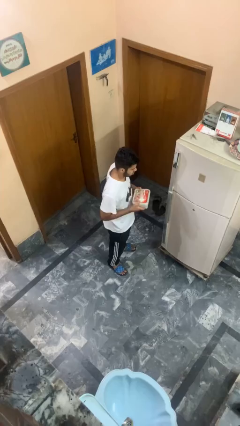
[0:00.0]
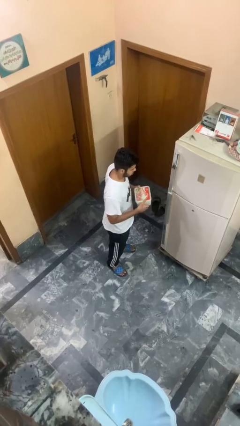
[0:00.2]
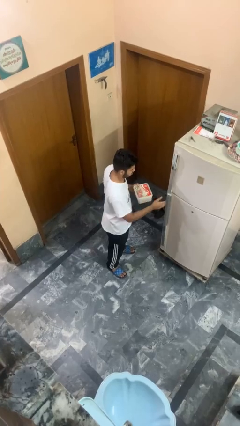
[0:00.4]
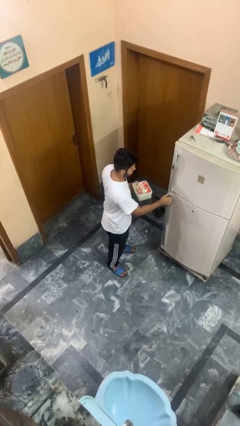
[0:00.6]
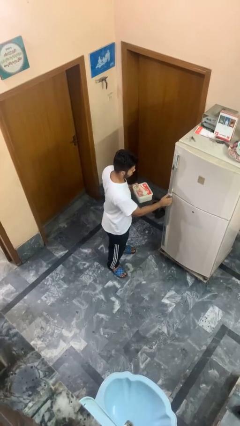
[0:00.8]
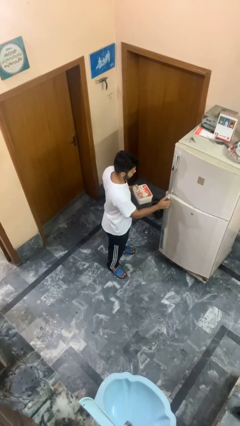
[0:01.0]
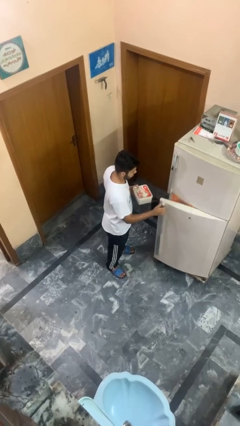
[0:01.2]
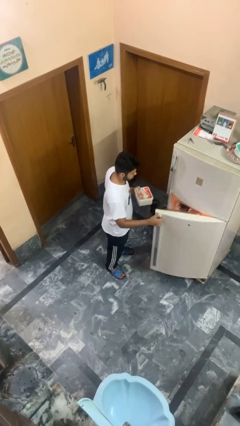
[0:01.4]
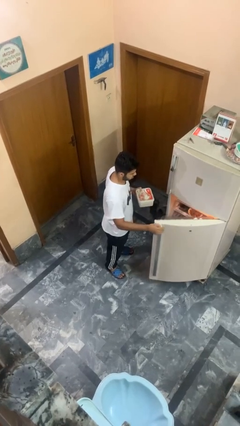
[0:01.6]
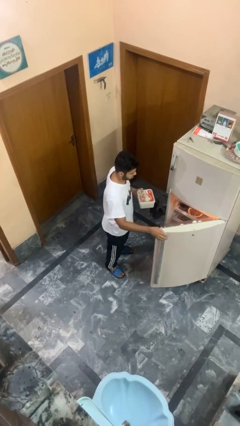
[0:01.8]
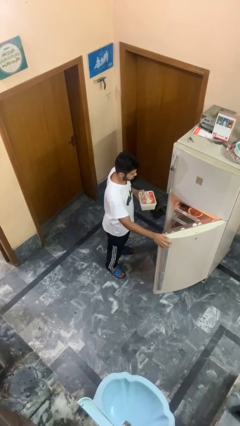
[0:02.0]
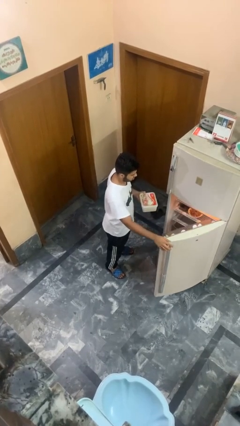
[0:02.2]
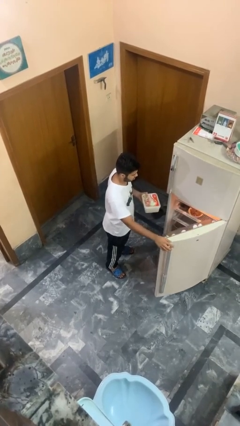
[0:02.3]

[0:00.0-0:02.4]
person opens refrigerator

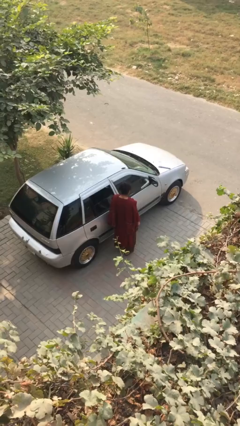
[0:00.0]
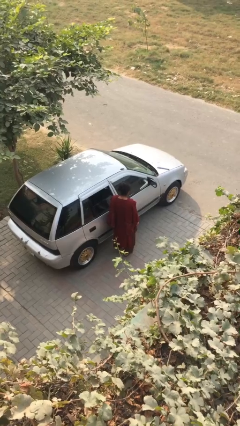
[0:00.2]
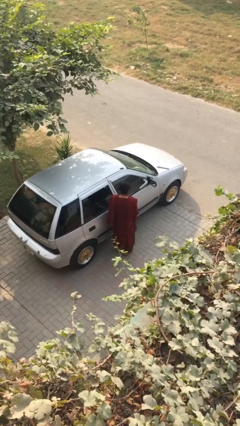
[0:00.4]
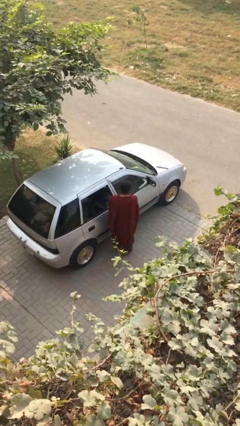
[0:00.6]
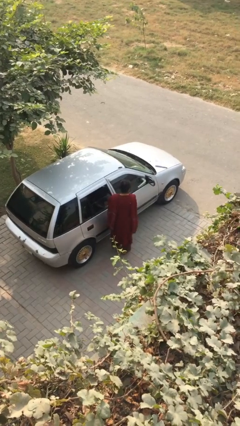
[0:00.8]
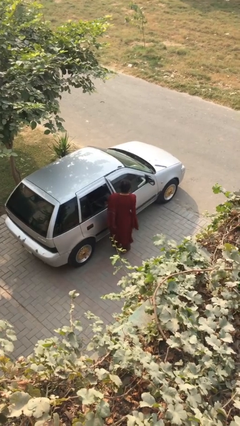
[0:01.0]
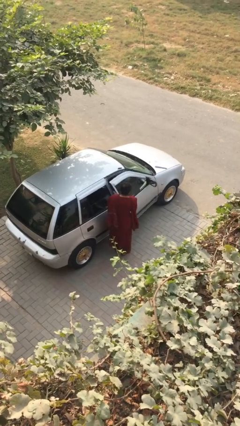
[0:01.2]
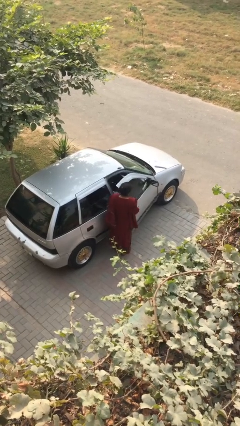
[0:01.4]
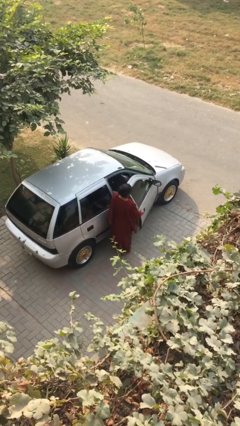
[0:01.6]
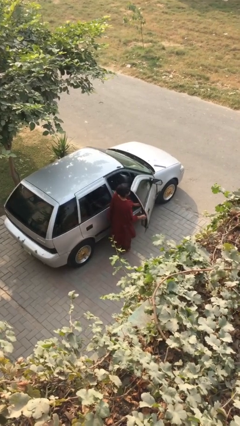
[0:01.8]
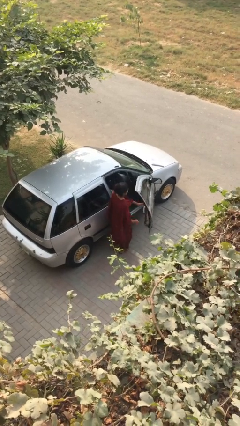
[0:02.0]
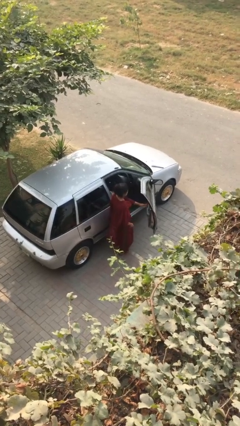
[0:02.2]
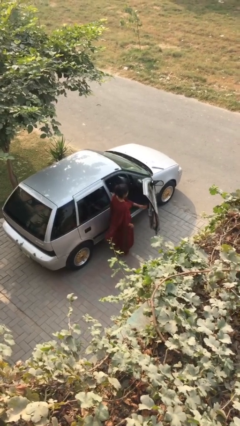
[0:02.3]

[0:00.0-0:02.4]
person opens car door

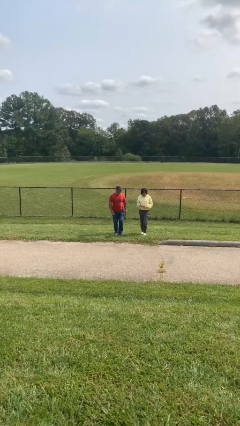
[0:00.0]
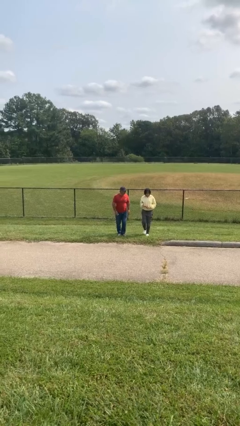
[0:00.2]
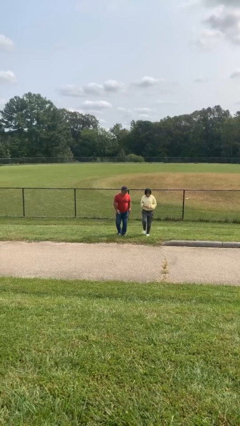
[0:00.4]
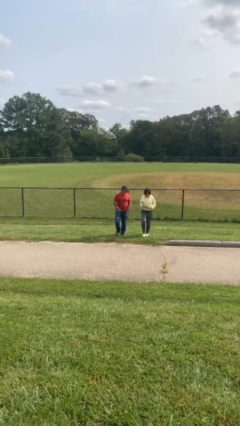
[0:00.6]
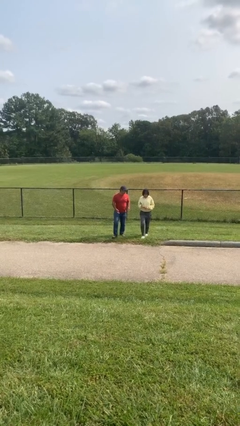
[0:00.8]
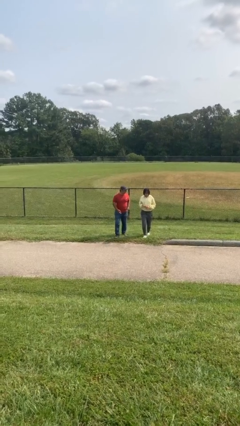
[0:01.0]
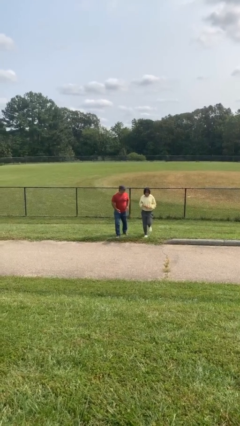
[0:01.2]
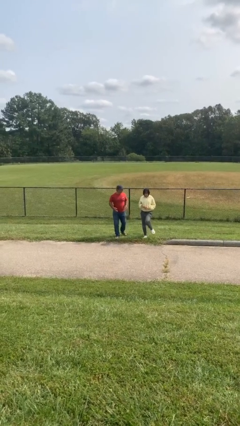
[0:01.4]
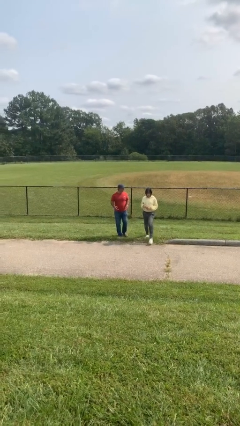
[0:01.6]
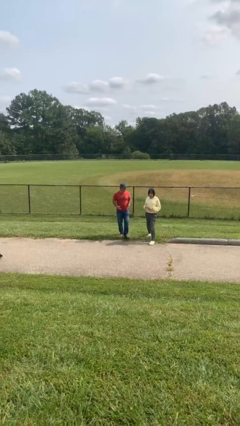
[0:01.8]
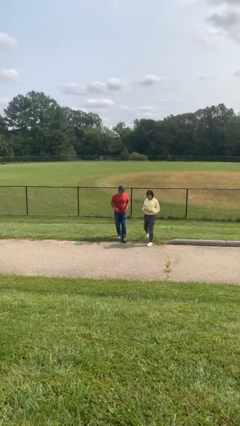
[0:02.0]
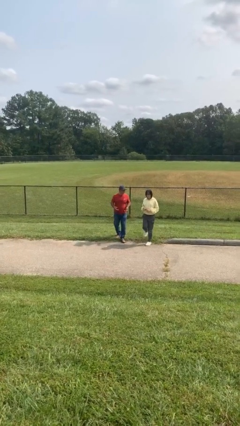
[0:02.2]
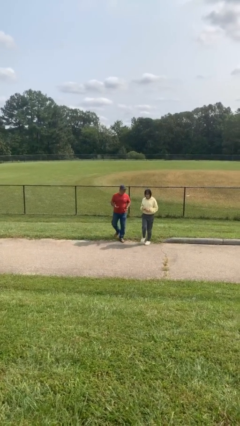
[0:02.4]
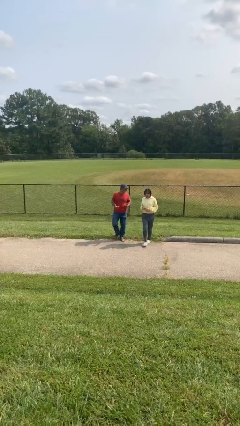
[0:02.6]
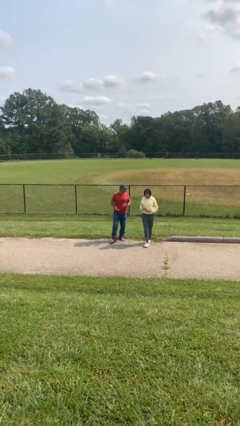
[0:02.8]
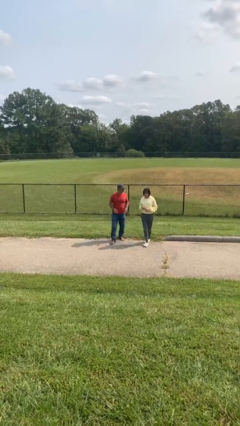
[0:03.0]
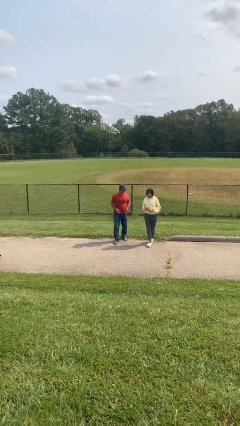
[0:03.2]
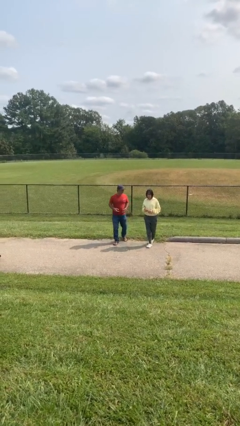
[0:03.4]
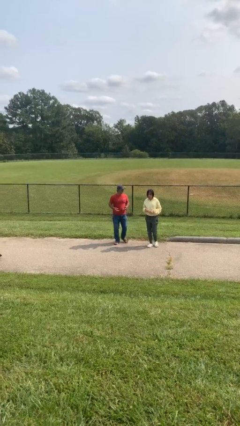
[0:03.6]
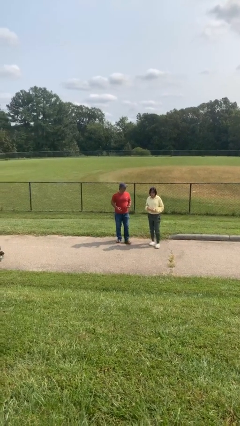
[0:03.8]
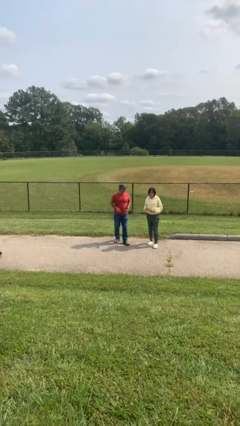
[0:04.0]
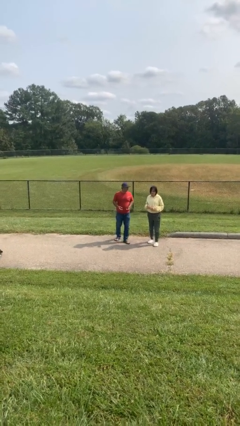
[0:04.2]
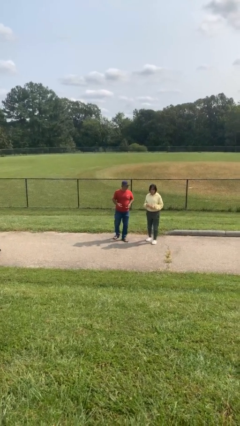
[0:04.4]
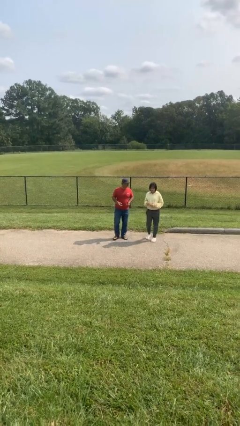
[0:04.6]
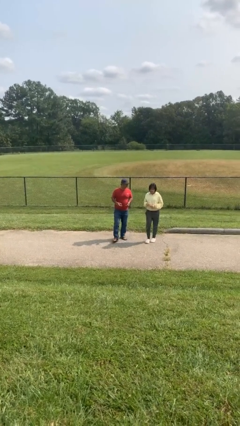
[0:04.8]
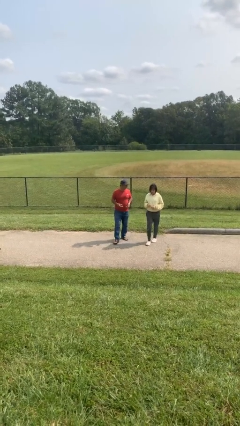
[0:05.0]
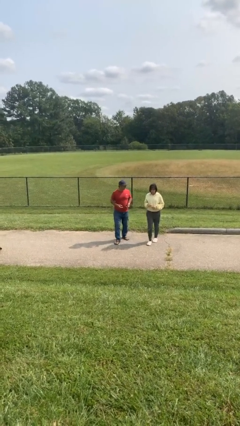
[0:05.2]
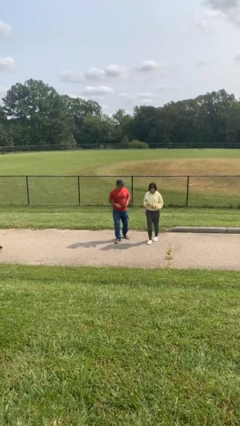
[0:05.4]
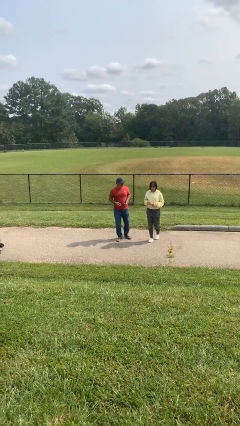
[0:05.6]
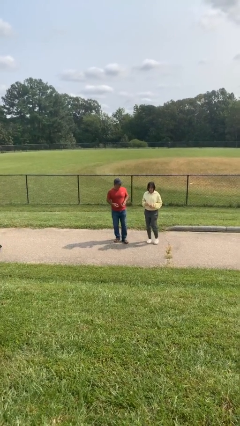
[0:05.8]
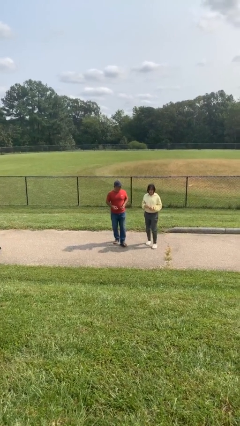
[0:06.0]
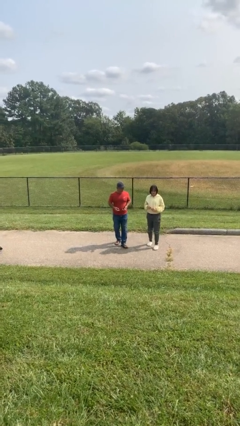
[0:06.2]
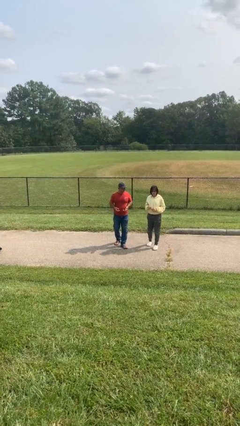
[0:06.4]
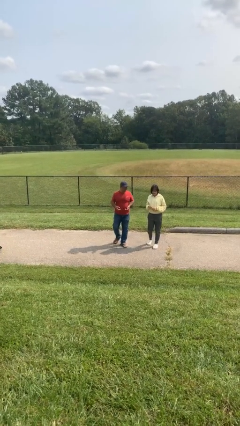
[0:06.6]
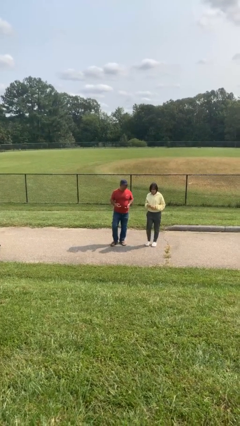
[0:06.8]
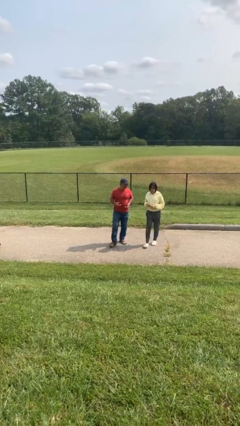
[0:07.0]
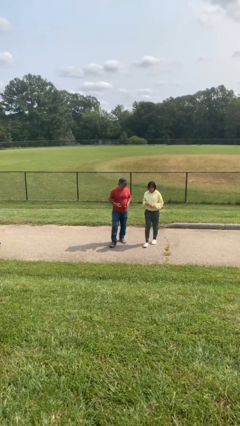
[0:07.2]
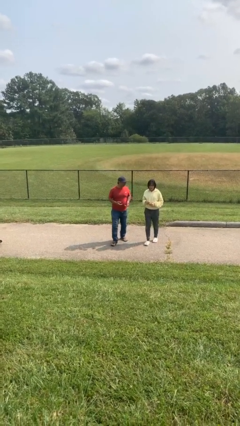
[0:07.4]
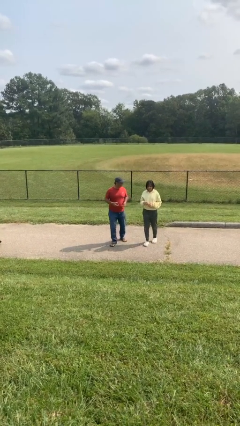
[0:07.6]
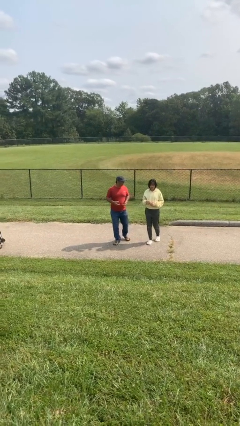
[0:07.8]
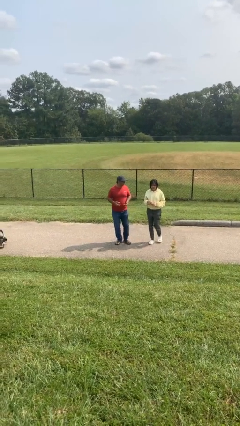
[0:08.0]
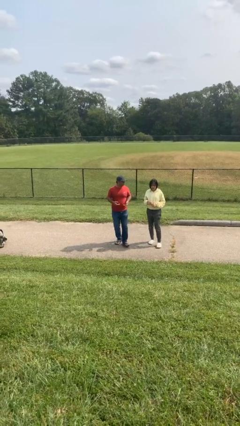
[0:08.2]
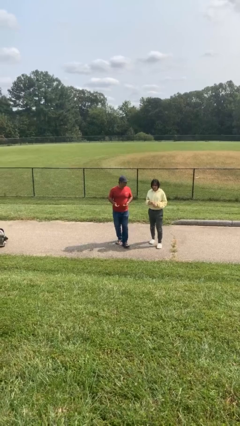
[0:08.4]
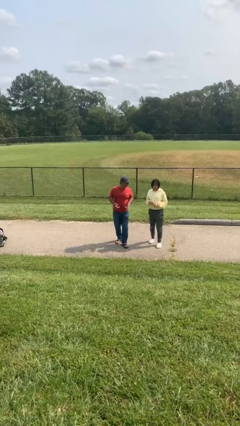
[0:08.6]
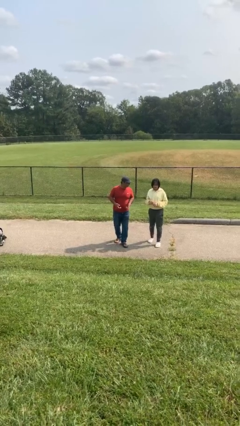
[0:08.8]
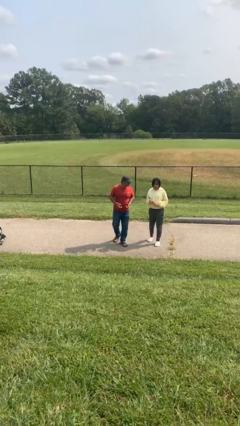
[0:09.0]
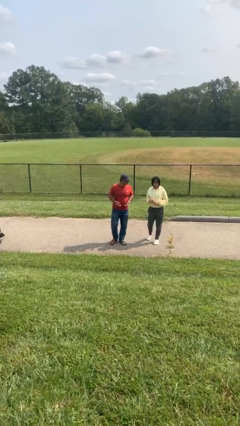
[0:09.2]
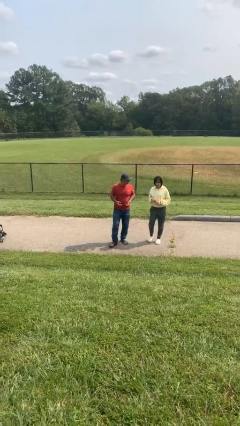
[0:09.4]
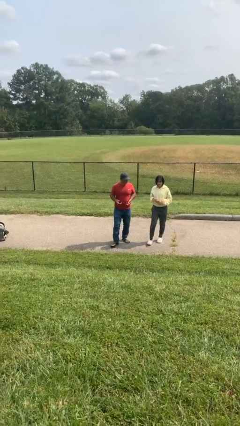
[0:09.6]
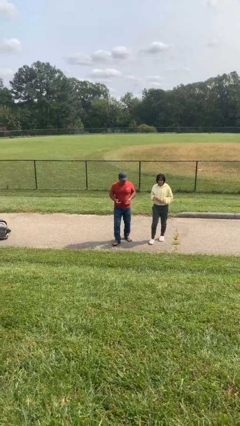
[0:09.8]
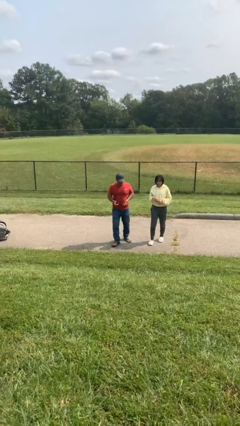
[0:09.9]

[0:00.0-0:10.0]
person talks to person

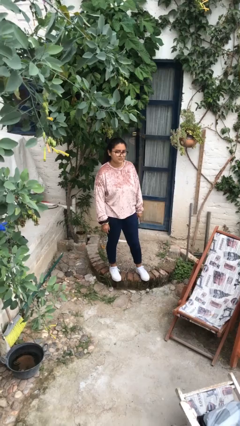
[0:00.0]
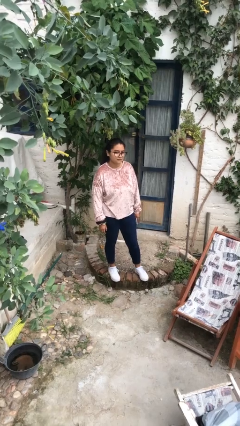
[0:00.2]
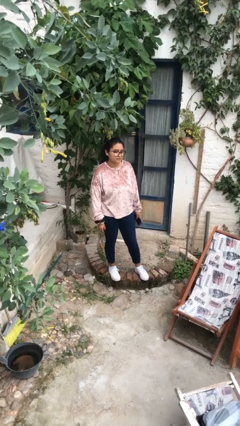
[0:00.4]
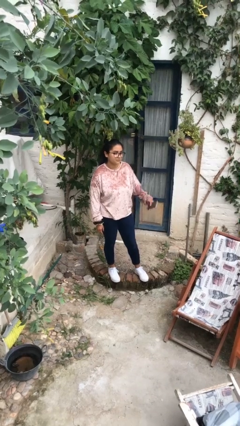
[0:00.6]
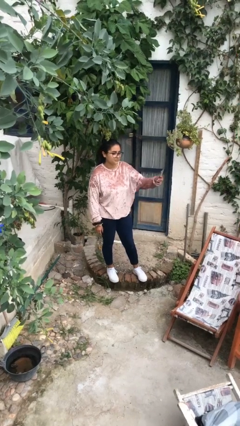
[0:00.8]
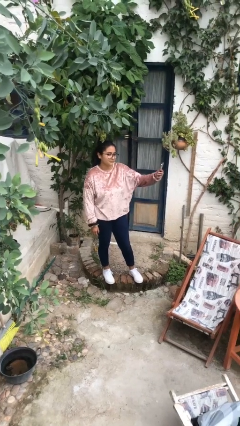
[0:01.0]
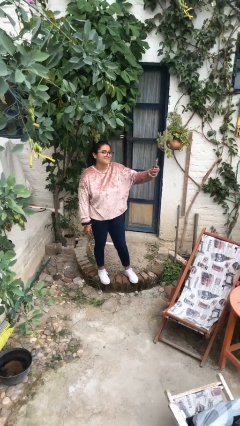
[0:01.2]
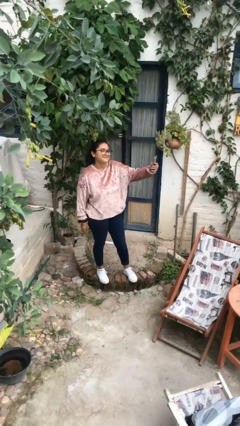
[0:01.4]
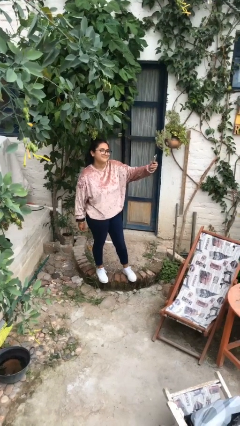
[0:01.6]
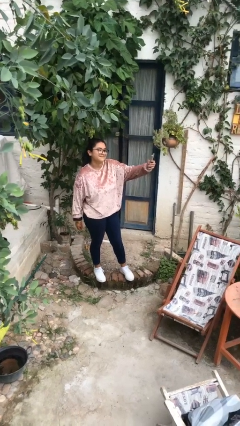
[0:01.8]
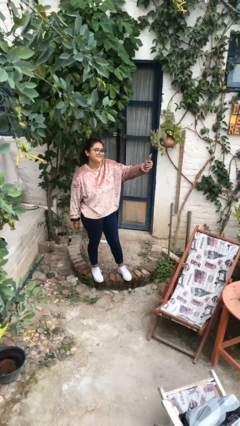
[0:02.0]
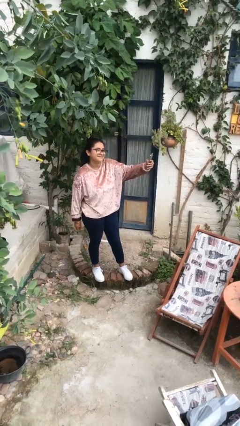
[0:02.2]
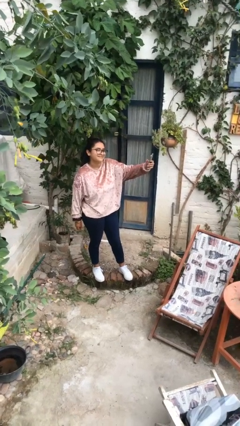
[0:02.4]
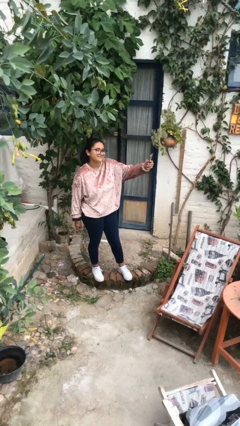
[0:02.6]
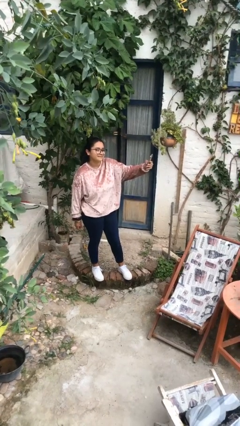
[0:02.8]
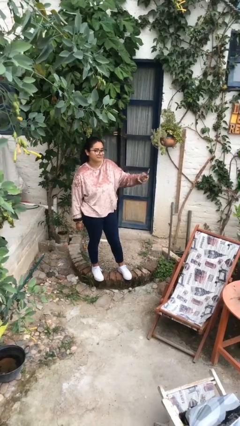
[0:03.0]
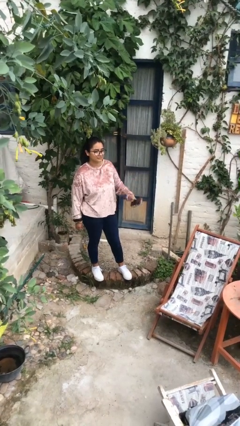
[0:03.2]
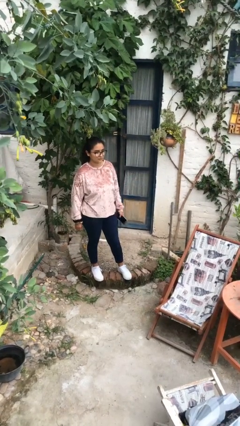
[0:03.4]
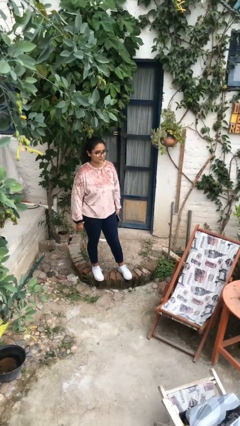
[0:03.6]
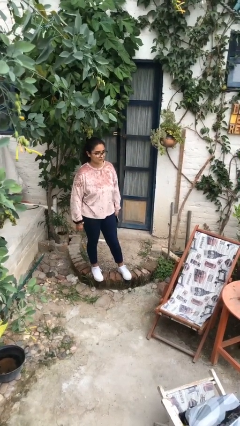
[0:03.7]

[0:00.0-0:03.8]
person takes selfie
